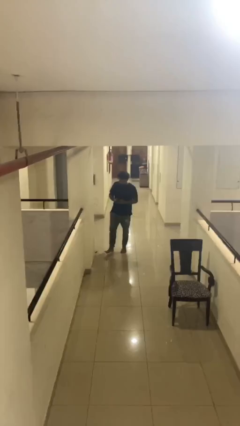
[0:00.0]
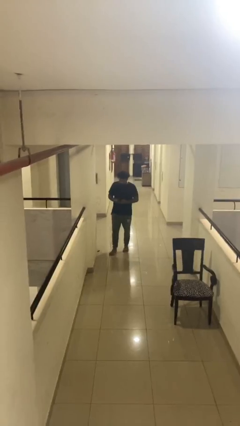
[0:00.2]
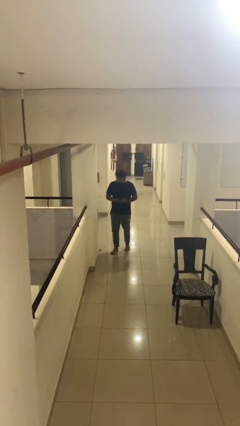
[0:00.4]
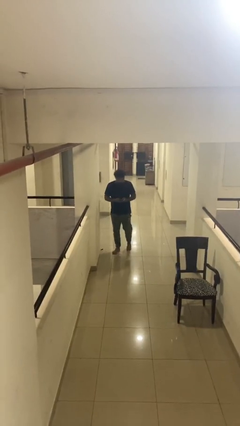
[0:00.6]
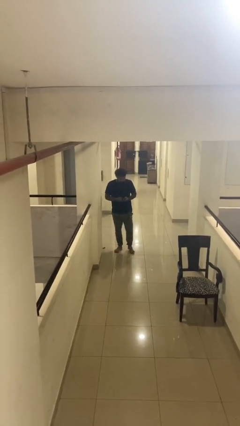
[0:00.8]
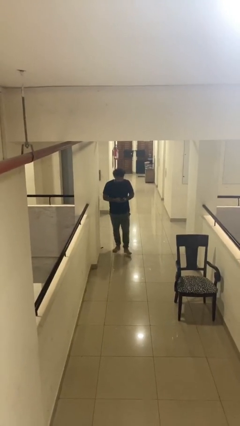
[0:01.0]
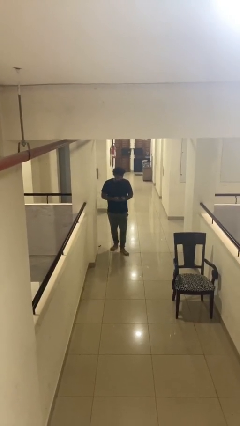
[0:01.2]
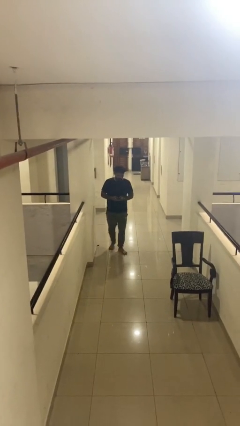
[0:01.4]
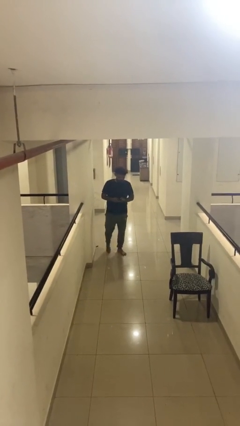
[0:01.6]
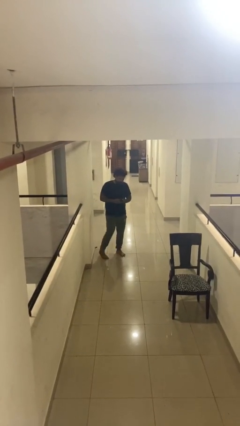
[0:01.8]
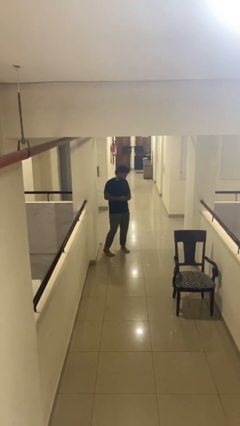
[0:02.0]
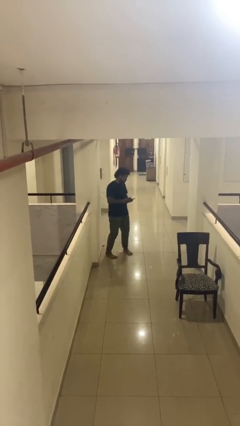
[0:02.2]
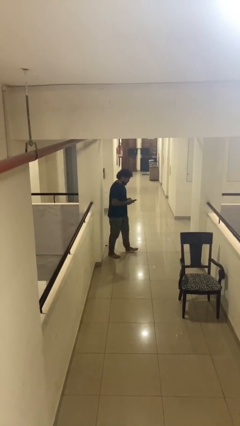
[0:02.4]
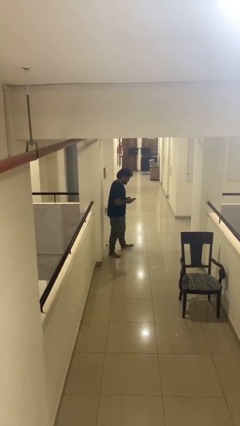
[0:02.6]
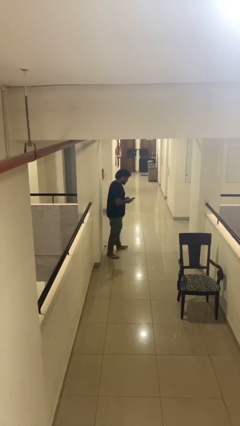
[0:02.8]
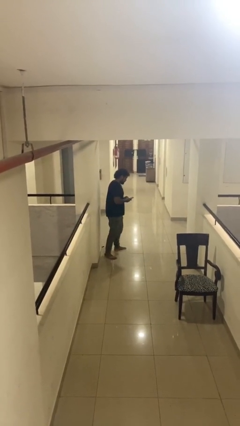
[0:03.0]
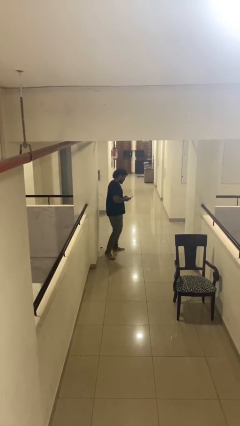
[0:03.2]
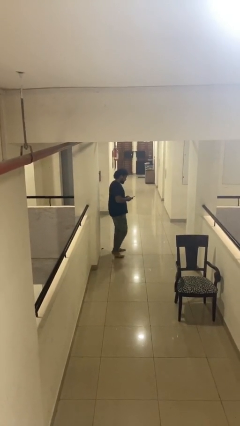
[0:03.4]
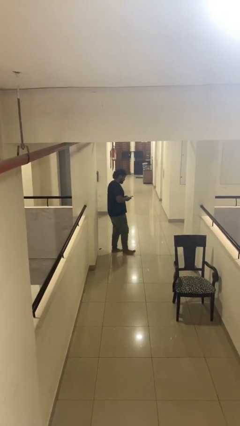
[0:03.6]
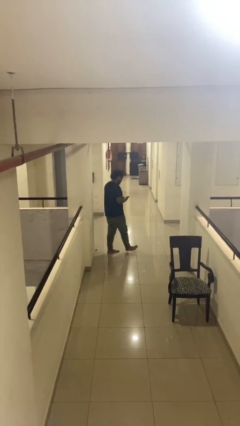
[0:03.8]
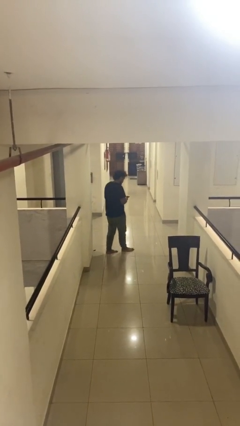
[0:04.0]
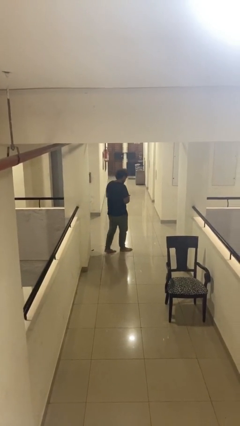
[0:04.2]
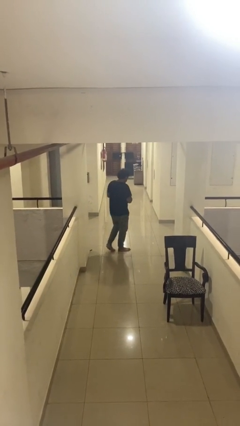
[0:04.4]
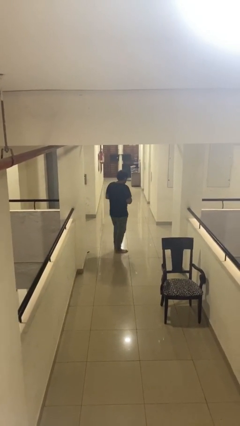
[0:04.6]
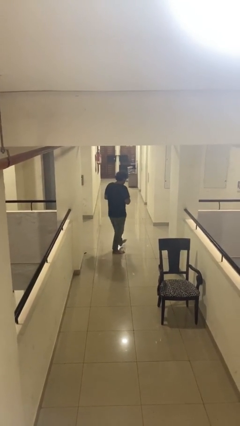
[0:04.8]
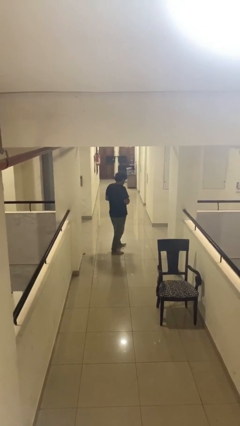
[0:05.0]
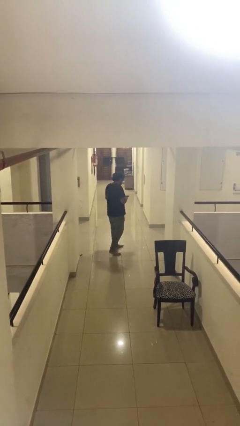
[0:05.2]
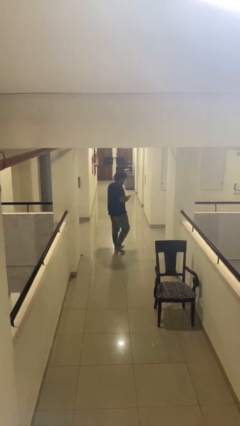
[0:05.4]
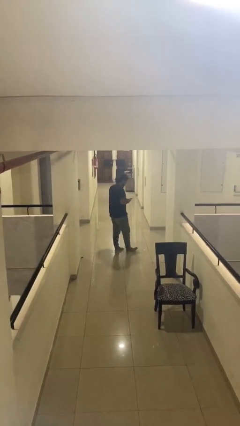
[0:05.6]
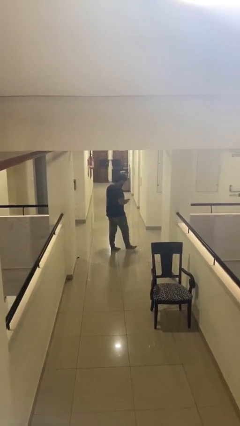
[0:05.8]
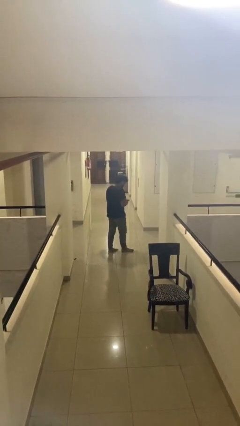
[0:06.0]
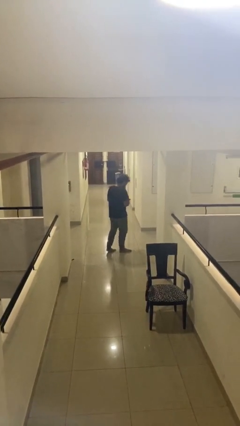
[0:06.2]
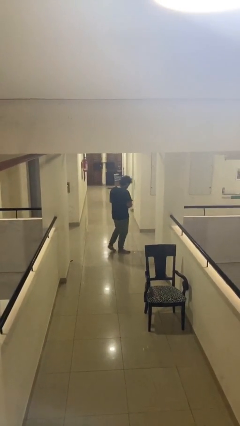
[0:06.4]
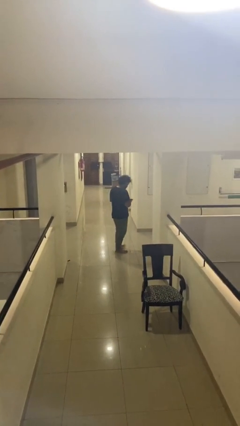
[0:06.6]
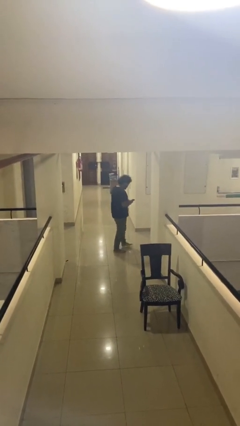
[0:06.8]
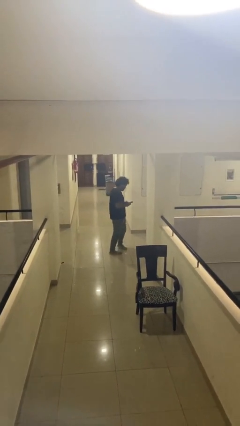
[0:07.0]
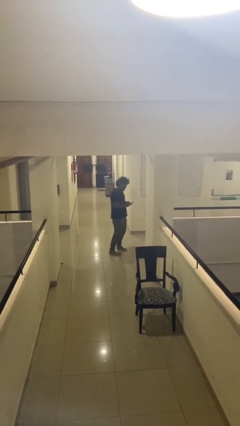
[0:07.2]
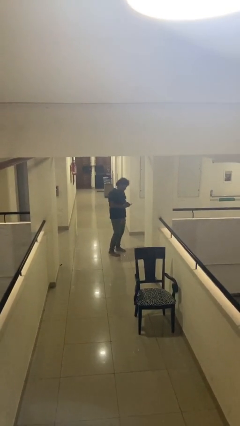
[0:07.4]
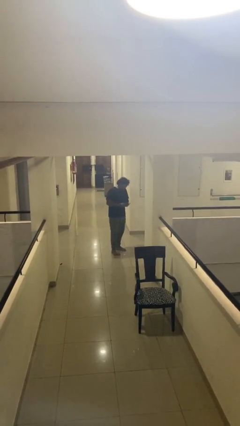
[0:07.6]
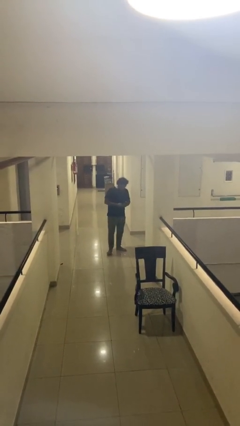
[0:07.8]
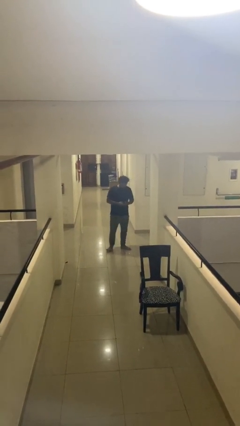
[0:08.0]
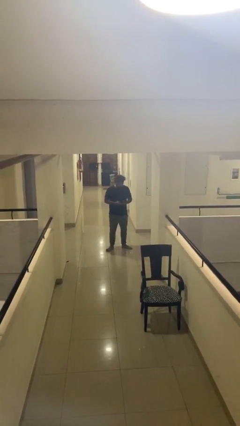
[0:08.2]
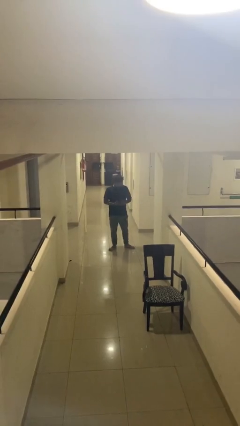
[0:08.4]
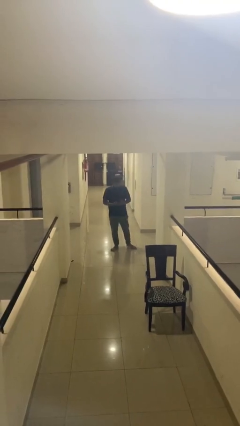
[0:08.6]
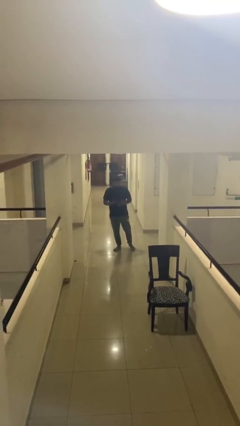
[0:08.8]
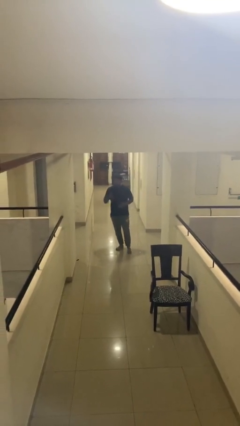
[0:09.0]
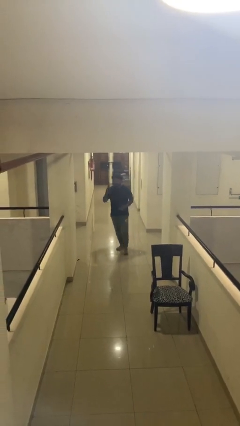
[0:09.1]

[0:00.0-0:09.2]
person texts on phone

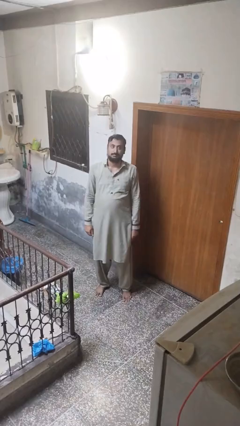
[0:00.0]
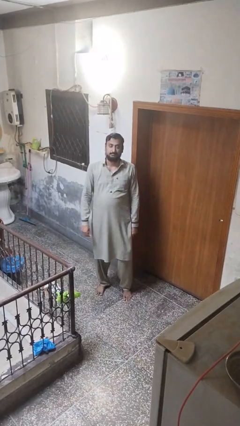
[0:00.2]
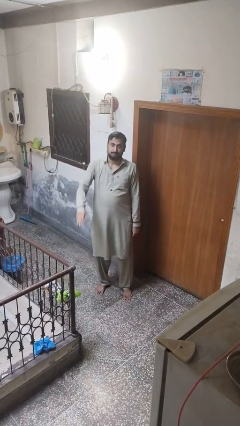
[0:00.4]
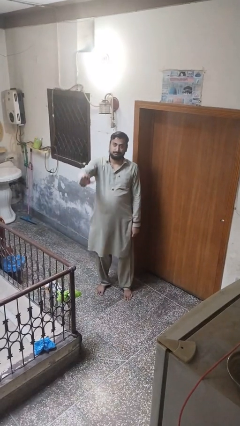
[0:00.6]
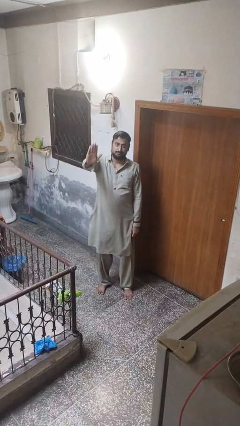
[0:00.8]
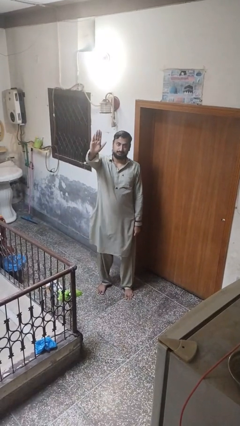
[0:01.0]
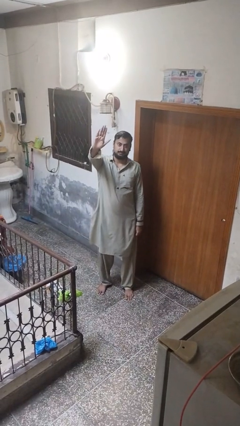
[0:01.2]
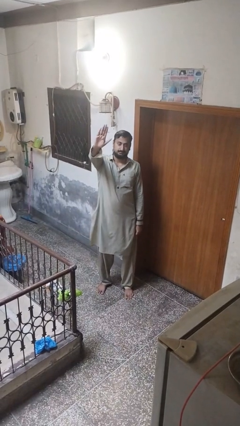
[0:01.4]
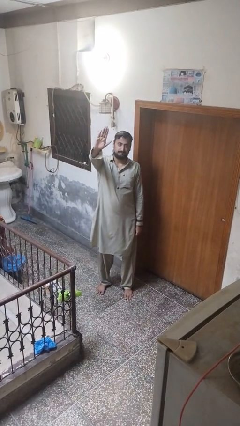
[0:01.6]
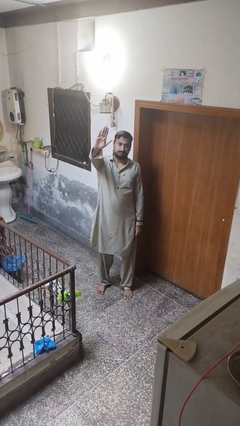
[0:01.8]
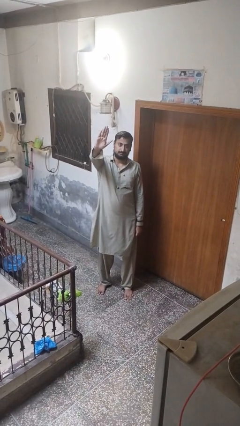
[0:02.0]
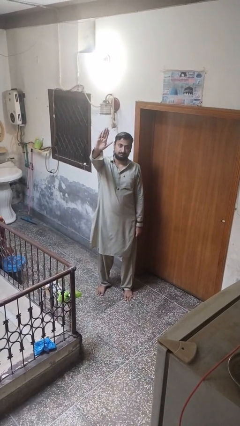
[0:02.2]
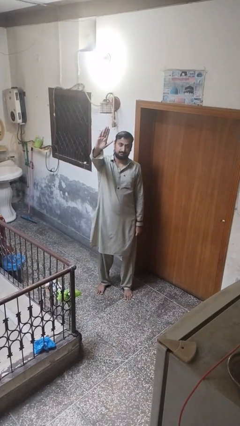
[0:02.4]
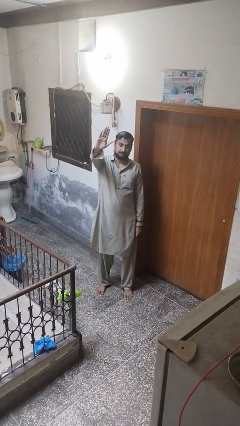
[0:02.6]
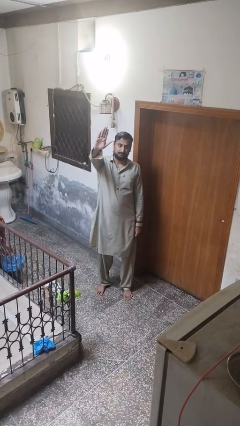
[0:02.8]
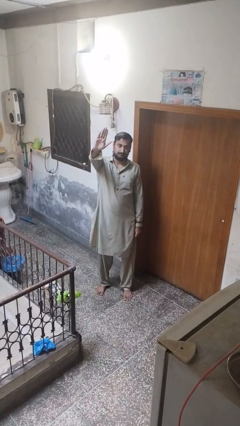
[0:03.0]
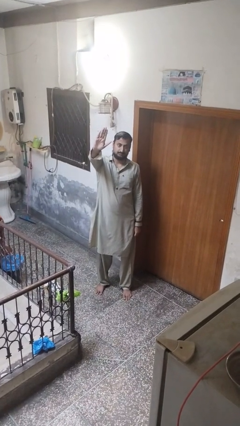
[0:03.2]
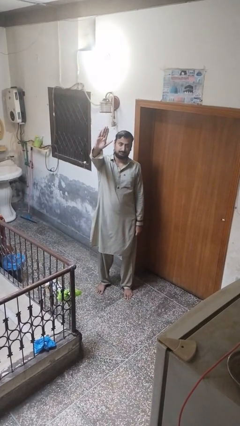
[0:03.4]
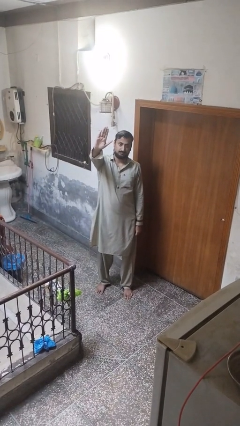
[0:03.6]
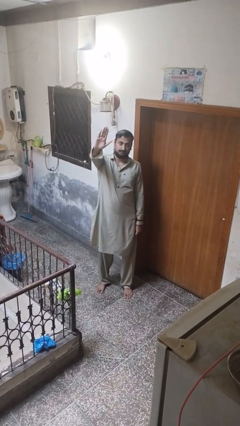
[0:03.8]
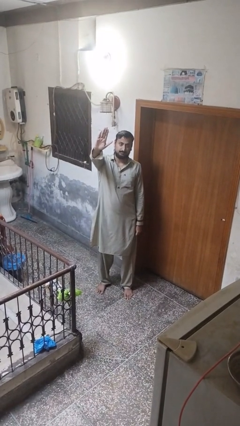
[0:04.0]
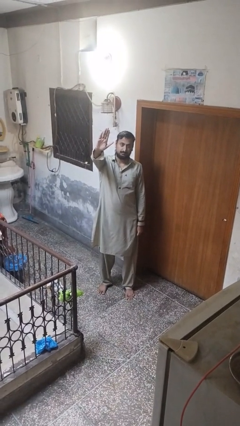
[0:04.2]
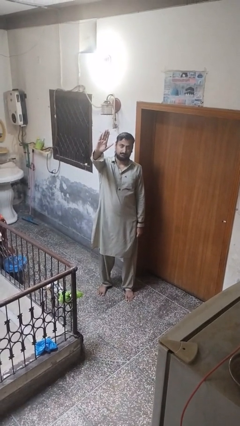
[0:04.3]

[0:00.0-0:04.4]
person gestures stop

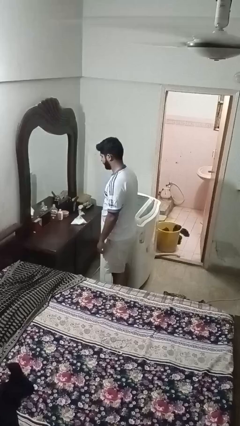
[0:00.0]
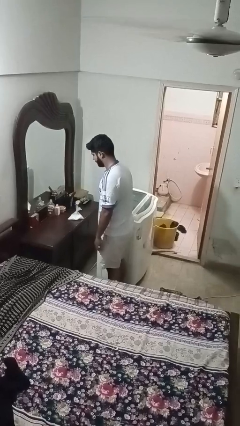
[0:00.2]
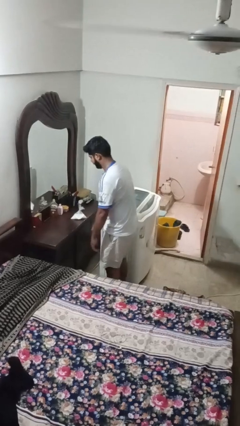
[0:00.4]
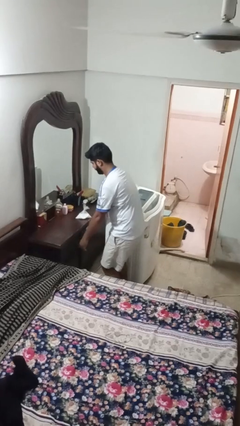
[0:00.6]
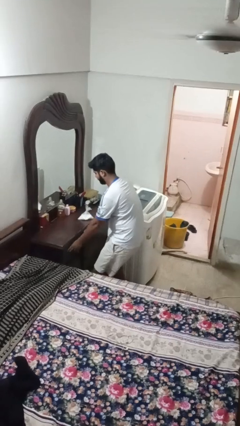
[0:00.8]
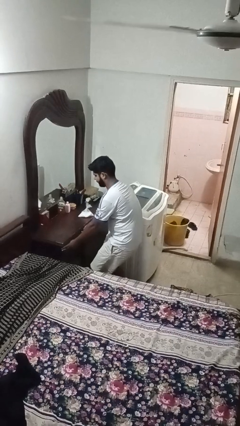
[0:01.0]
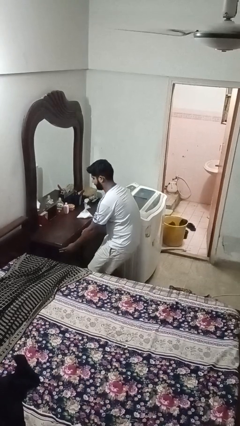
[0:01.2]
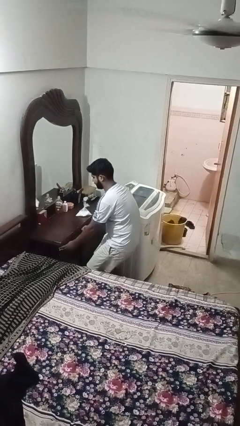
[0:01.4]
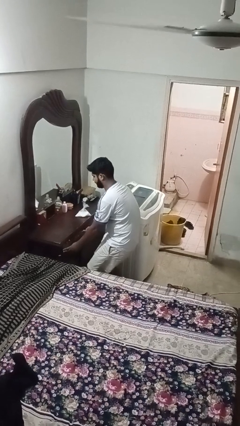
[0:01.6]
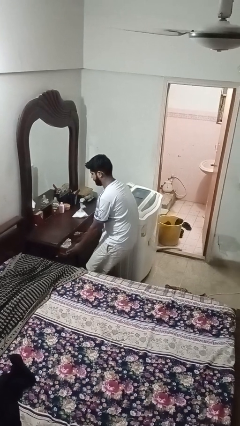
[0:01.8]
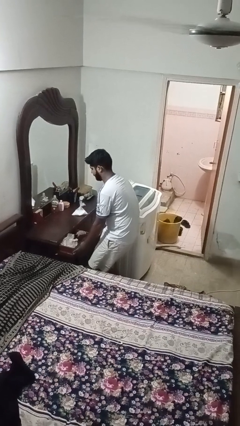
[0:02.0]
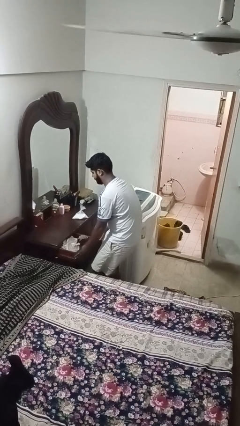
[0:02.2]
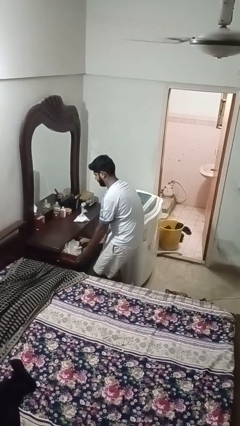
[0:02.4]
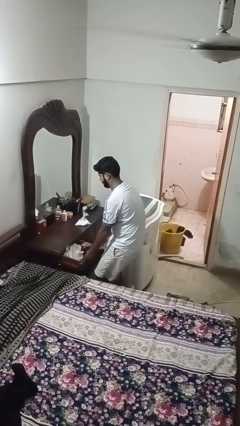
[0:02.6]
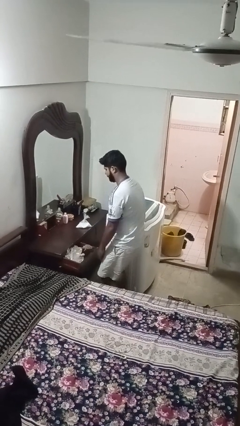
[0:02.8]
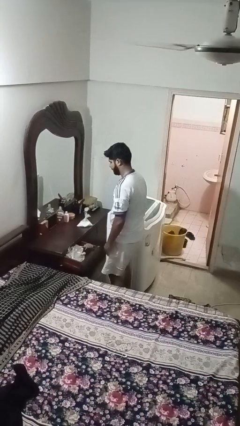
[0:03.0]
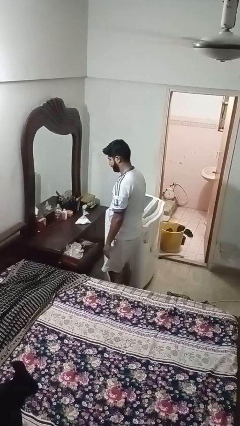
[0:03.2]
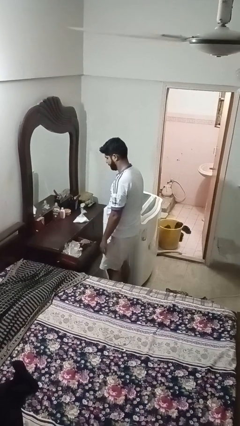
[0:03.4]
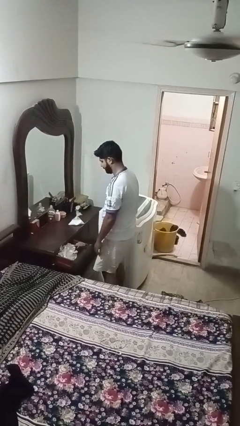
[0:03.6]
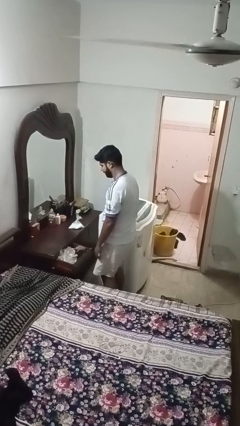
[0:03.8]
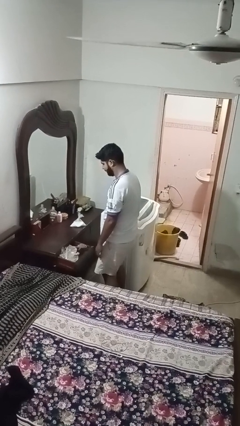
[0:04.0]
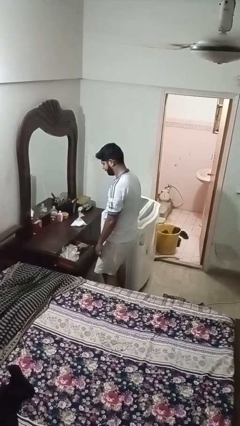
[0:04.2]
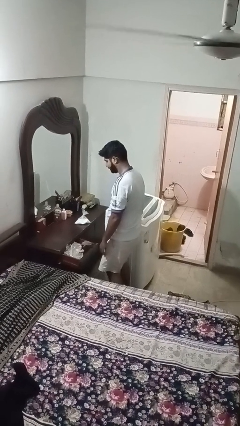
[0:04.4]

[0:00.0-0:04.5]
person opens dresser drawer
